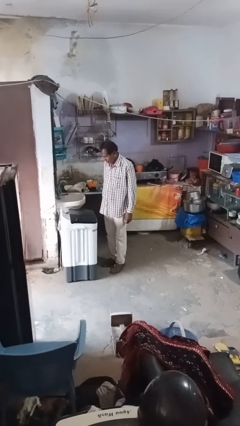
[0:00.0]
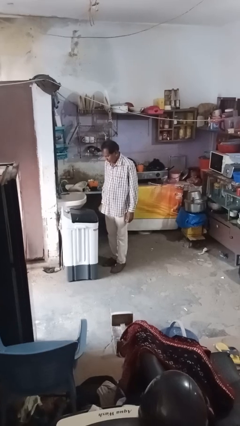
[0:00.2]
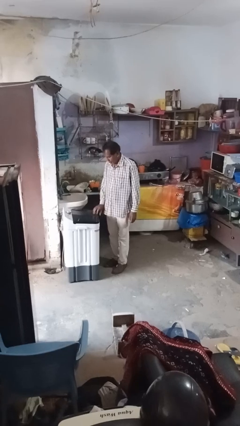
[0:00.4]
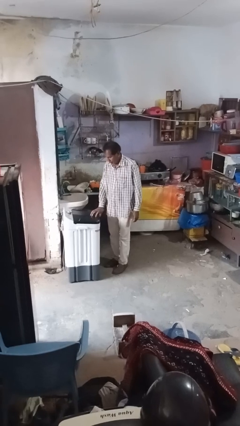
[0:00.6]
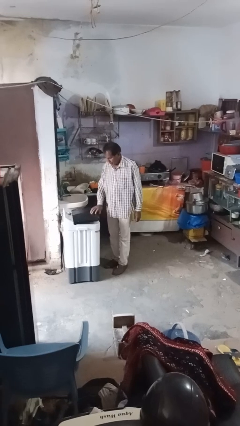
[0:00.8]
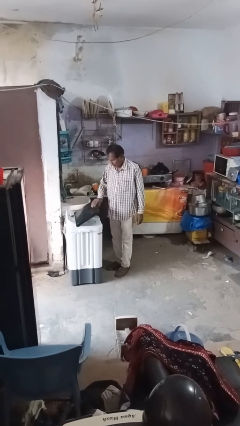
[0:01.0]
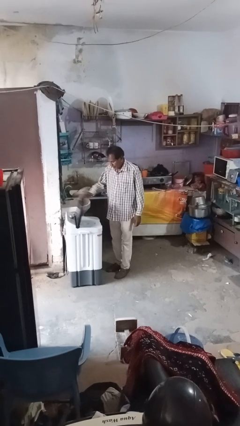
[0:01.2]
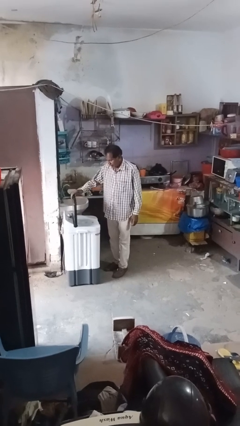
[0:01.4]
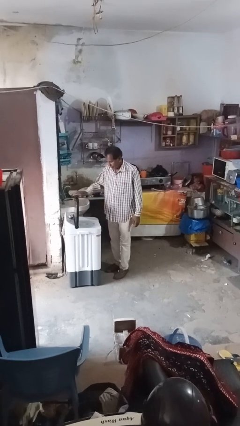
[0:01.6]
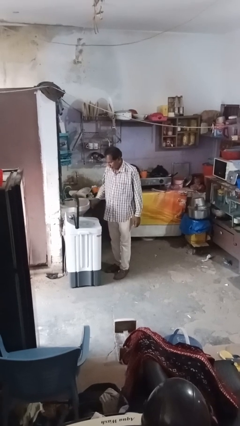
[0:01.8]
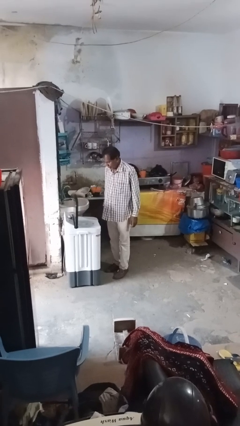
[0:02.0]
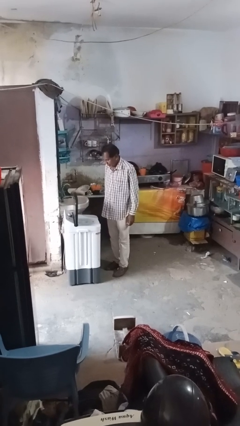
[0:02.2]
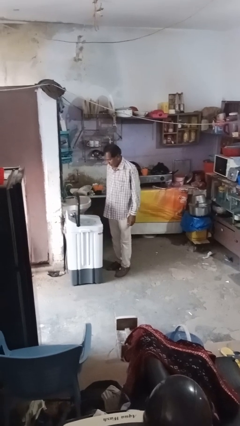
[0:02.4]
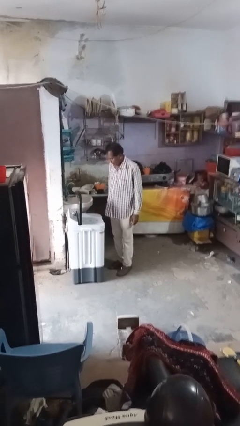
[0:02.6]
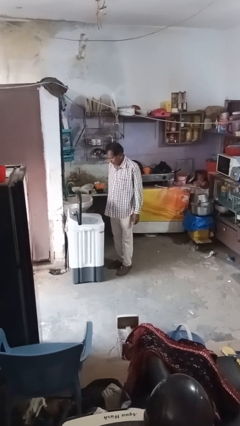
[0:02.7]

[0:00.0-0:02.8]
person opens clothes washer

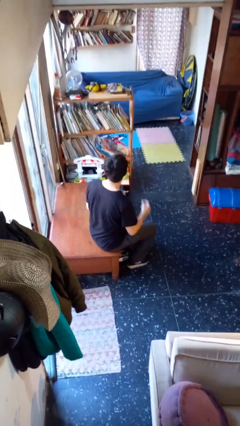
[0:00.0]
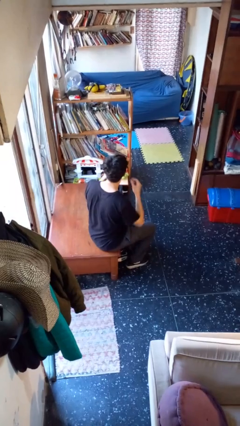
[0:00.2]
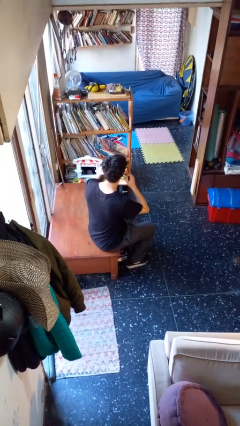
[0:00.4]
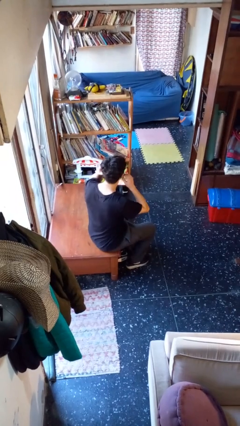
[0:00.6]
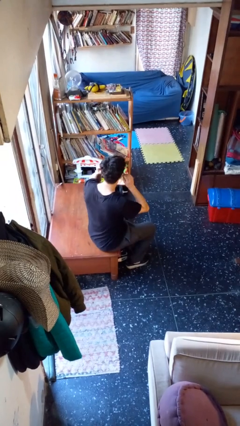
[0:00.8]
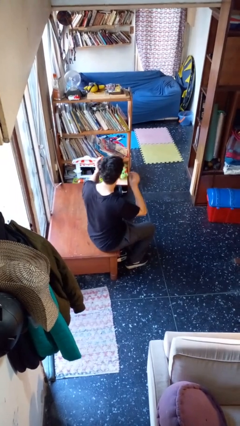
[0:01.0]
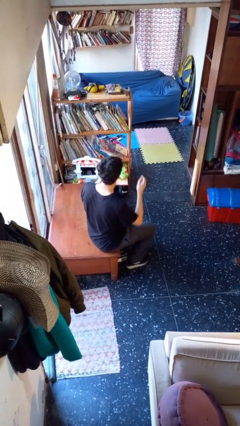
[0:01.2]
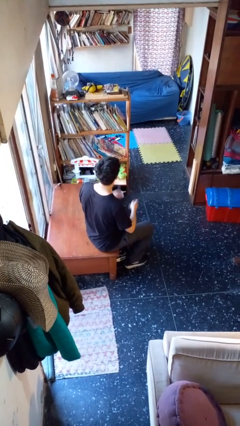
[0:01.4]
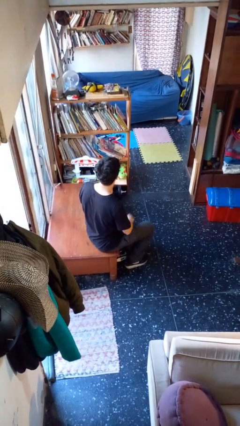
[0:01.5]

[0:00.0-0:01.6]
person takes off headphones

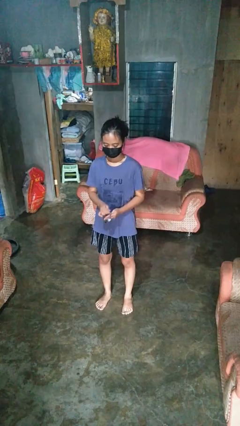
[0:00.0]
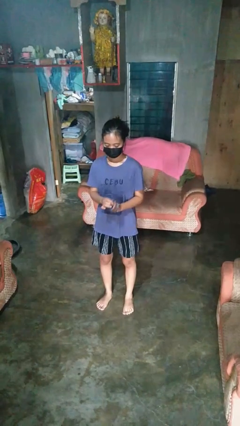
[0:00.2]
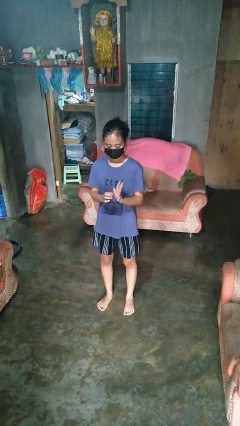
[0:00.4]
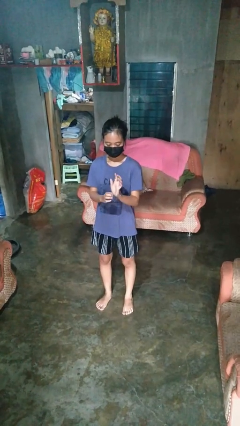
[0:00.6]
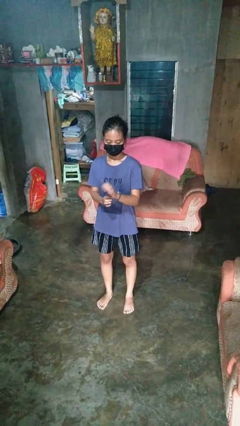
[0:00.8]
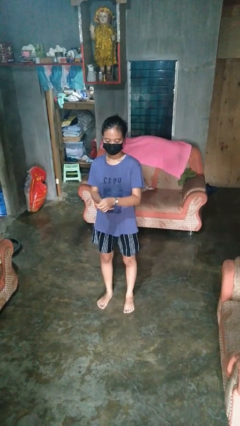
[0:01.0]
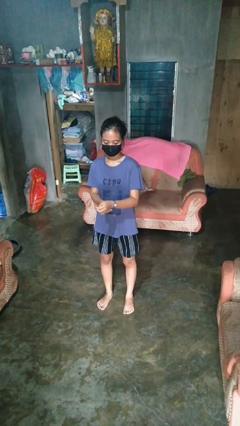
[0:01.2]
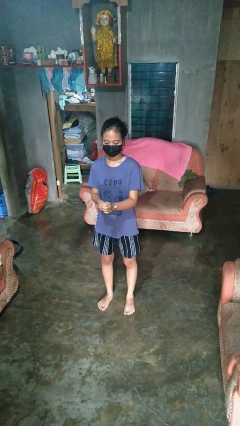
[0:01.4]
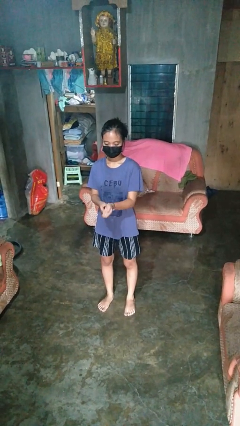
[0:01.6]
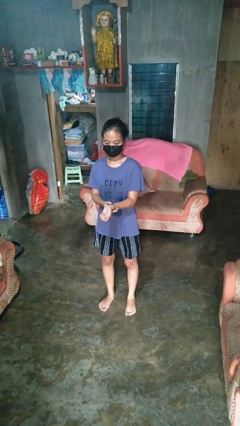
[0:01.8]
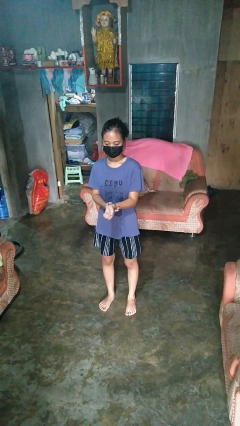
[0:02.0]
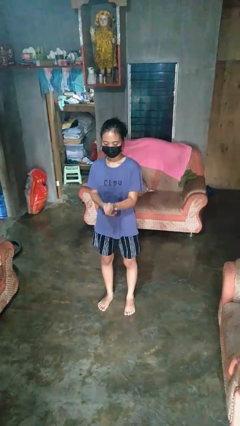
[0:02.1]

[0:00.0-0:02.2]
person puts on wristwatch

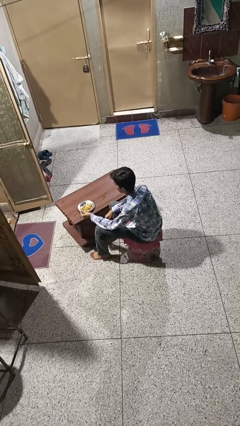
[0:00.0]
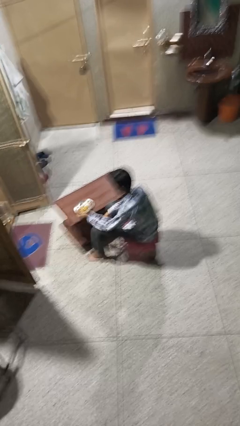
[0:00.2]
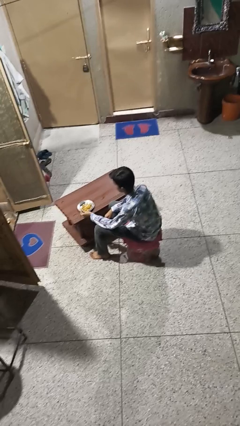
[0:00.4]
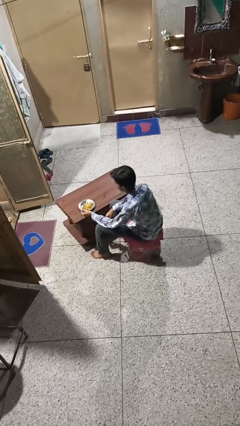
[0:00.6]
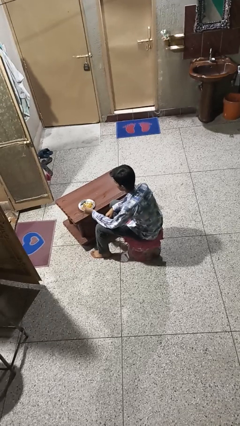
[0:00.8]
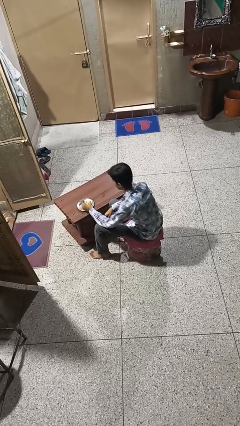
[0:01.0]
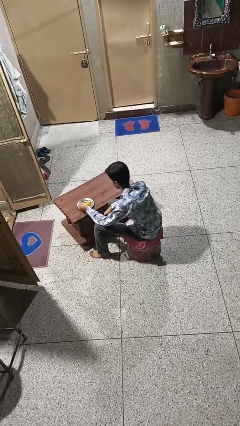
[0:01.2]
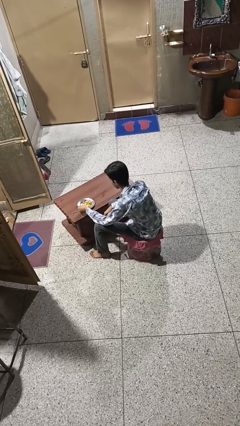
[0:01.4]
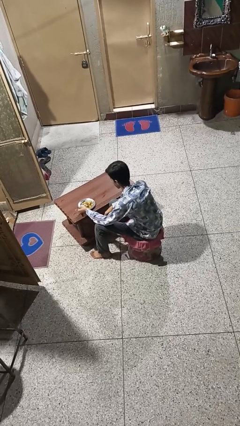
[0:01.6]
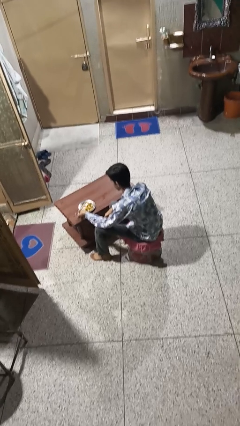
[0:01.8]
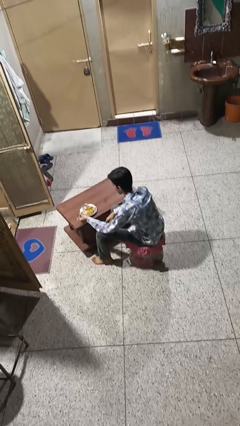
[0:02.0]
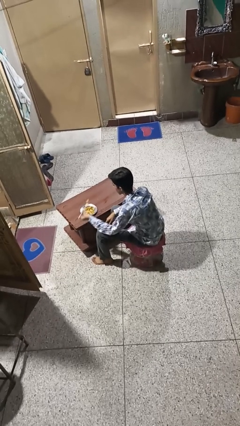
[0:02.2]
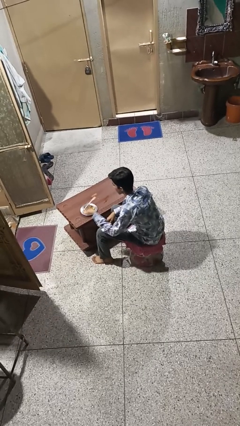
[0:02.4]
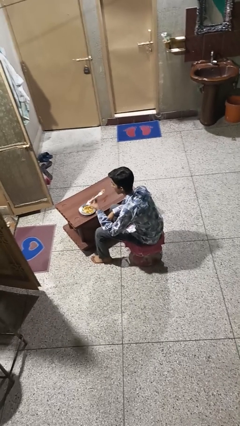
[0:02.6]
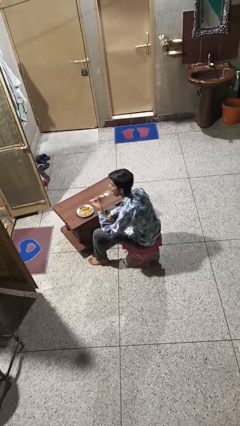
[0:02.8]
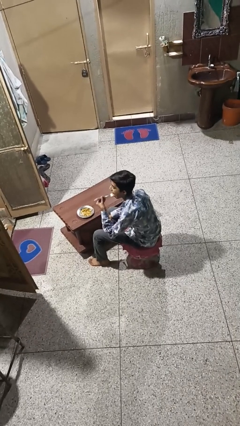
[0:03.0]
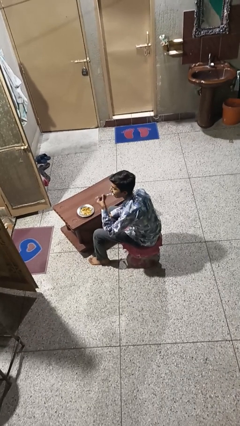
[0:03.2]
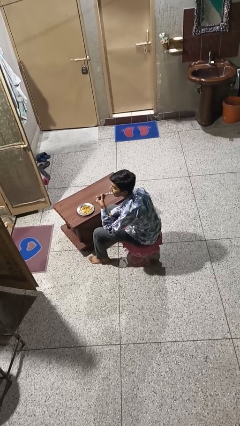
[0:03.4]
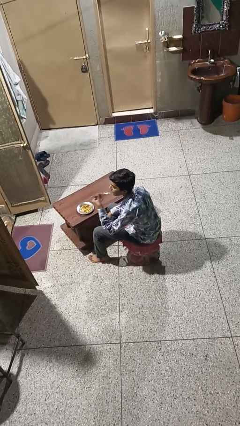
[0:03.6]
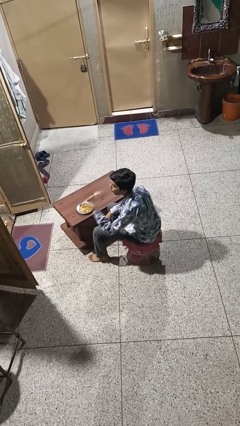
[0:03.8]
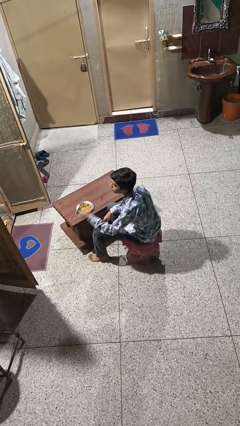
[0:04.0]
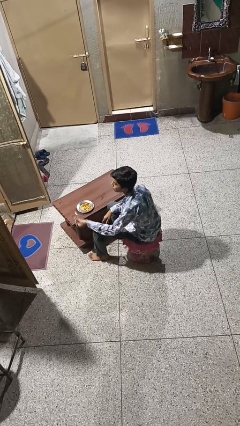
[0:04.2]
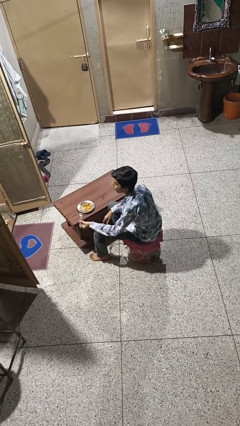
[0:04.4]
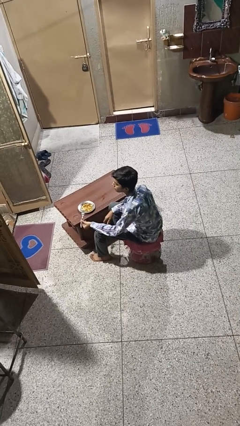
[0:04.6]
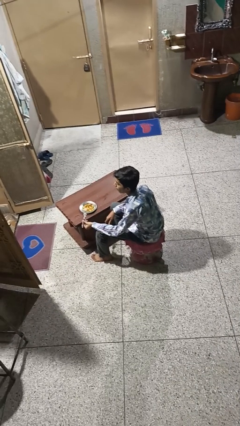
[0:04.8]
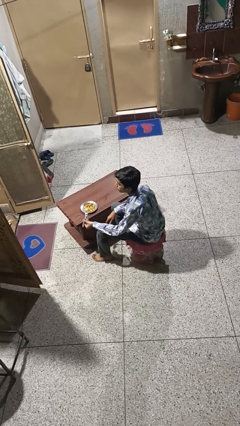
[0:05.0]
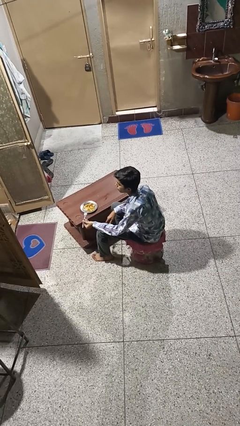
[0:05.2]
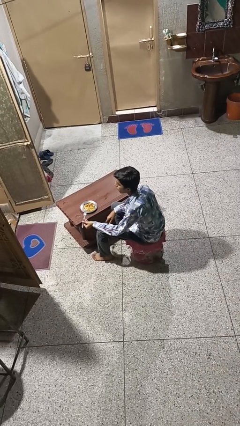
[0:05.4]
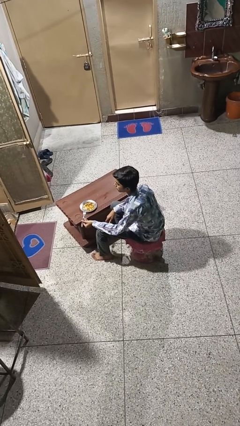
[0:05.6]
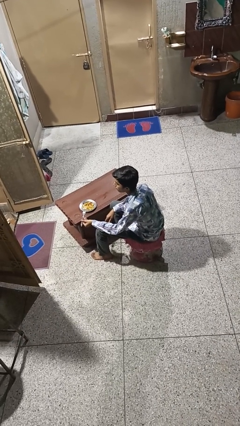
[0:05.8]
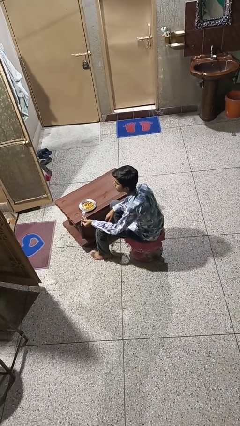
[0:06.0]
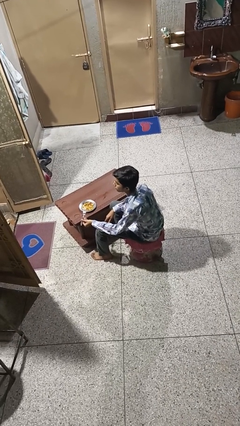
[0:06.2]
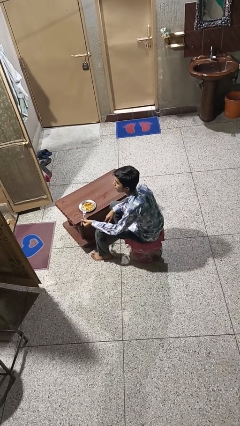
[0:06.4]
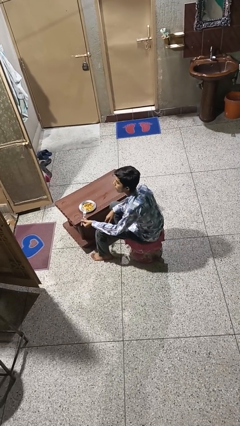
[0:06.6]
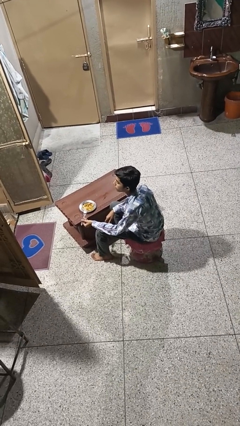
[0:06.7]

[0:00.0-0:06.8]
person eats with utensil

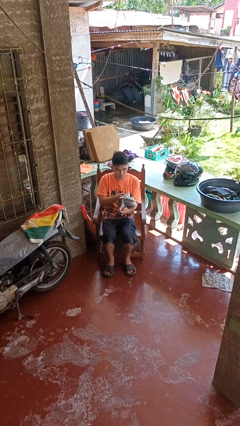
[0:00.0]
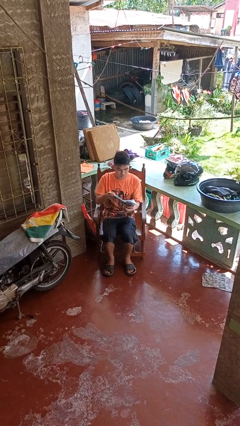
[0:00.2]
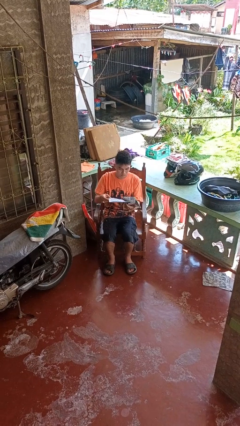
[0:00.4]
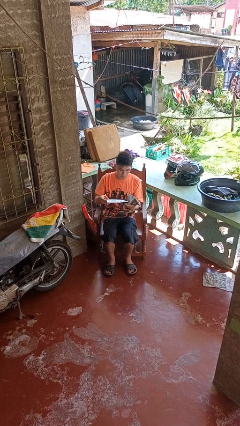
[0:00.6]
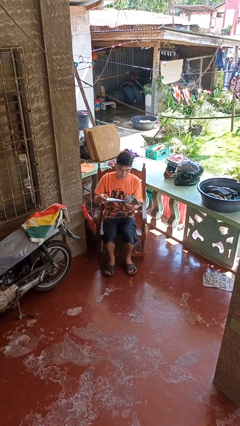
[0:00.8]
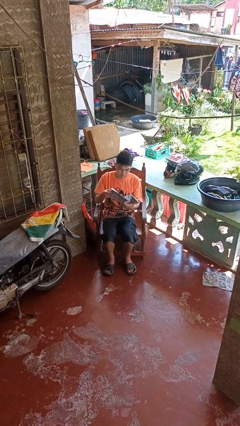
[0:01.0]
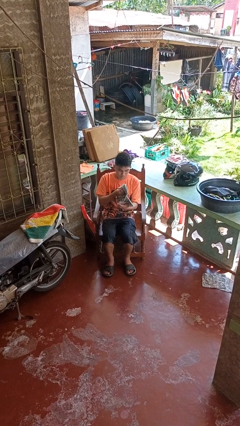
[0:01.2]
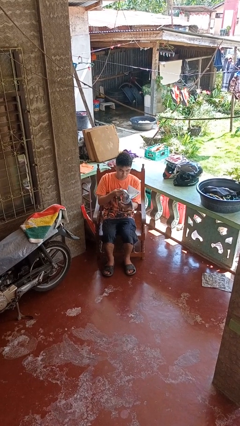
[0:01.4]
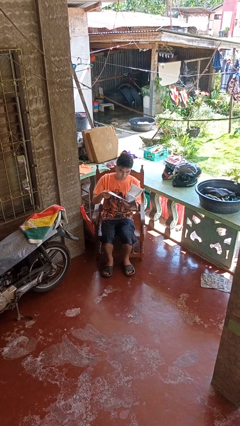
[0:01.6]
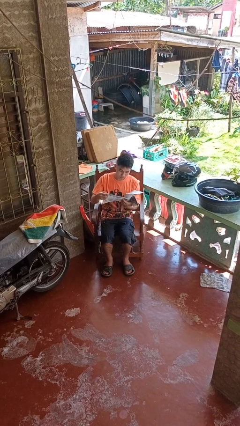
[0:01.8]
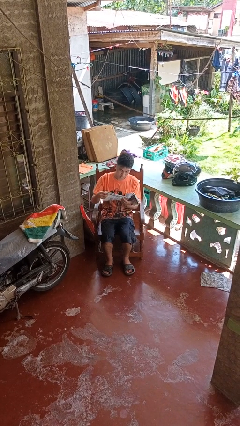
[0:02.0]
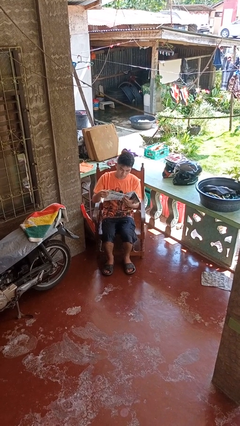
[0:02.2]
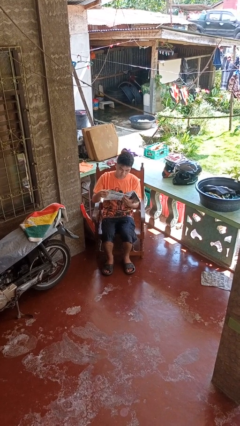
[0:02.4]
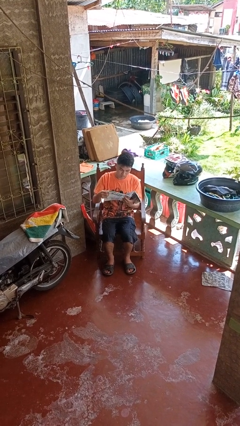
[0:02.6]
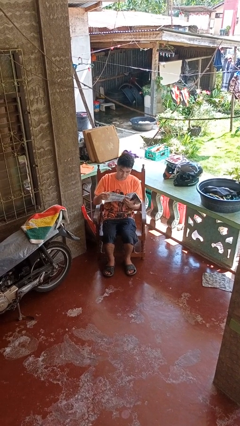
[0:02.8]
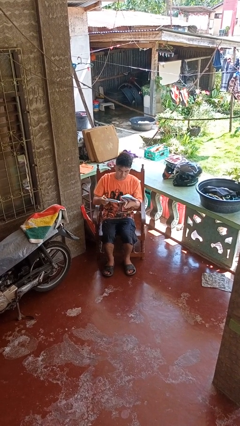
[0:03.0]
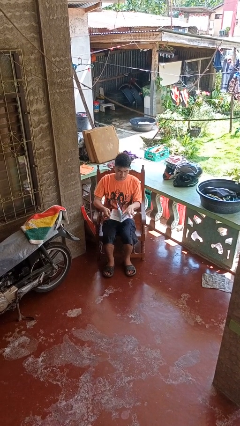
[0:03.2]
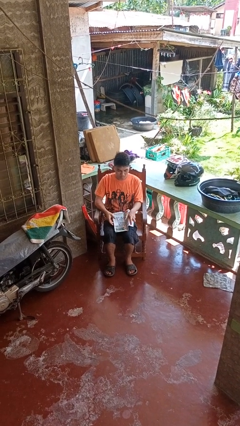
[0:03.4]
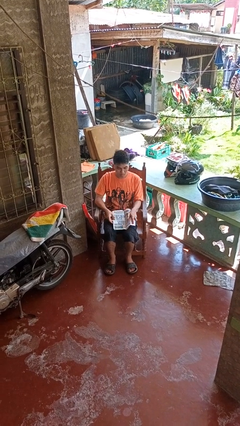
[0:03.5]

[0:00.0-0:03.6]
person reads newspaper

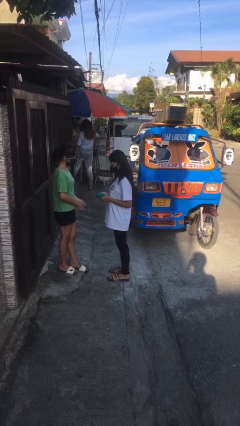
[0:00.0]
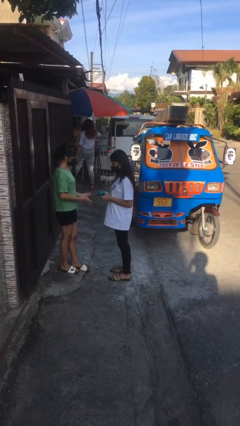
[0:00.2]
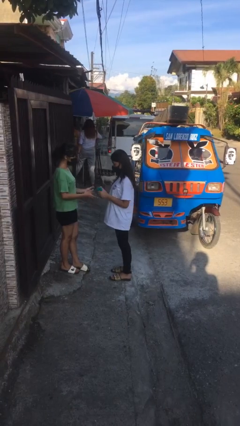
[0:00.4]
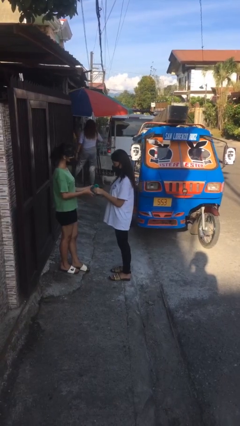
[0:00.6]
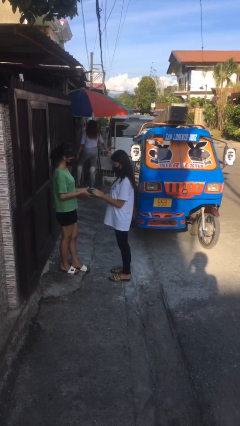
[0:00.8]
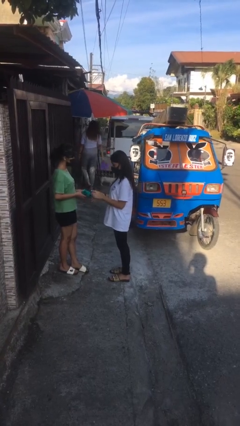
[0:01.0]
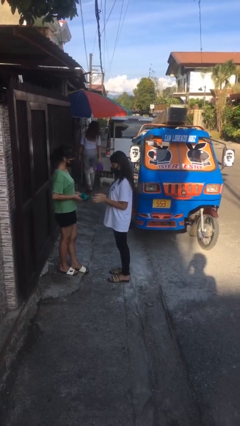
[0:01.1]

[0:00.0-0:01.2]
person transfers object to person
